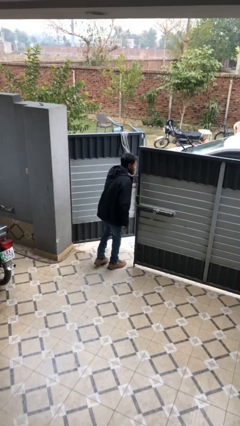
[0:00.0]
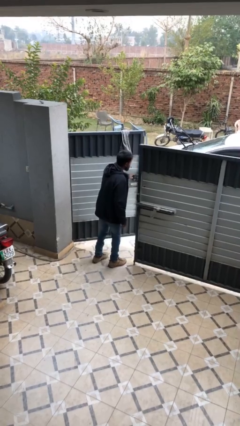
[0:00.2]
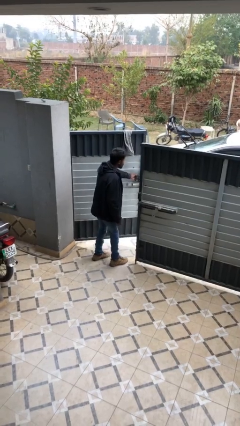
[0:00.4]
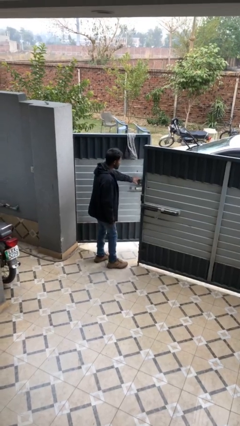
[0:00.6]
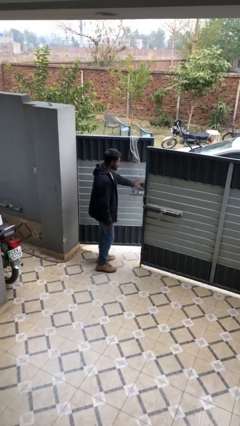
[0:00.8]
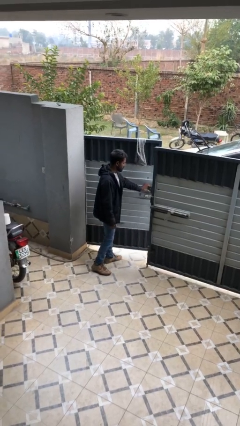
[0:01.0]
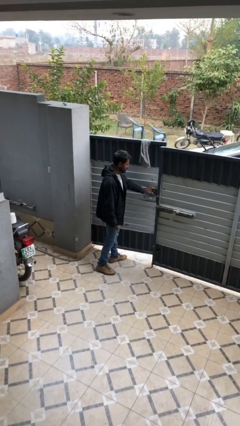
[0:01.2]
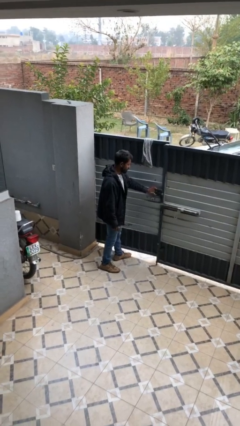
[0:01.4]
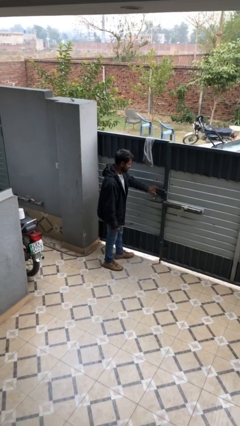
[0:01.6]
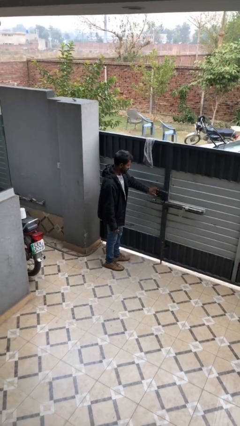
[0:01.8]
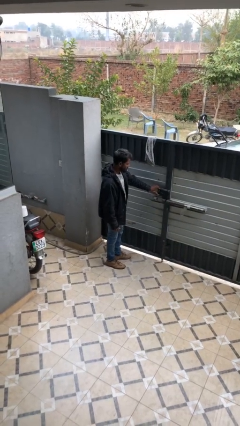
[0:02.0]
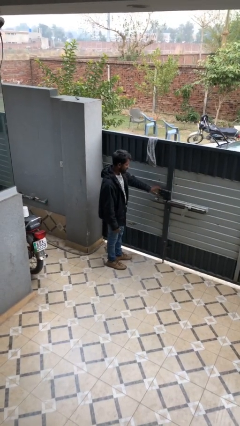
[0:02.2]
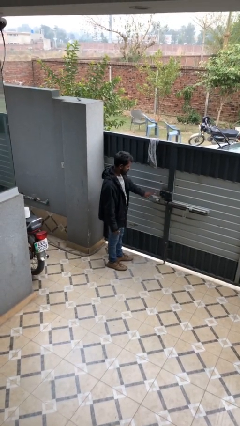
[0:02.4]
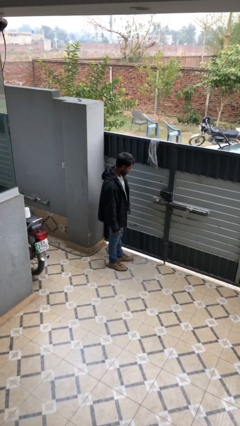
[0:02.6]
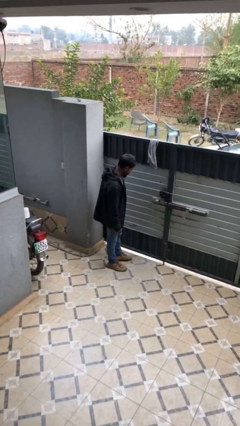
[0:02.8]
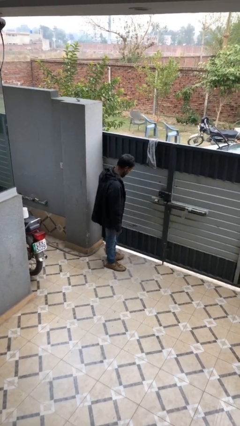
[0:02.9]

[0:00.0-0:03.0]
person closes facility door

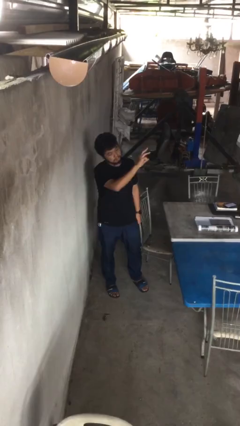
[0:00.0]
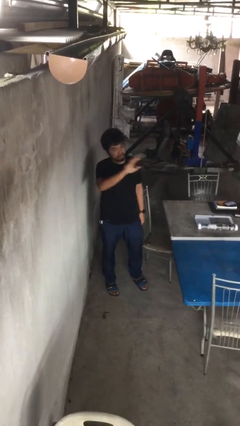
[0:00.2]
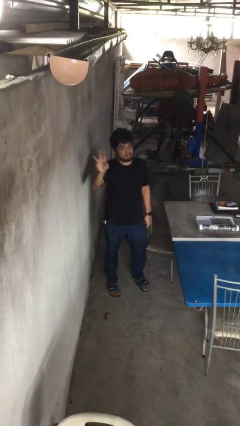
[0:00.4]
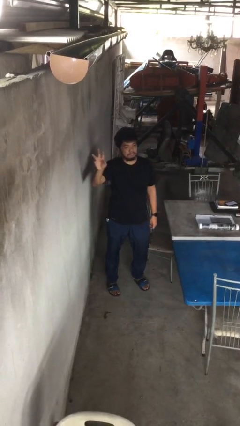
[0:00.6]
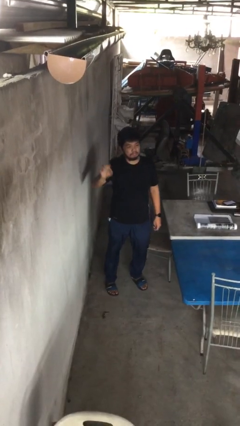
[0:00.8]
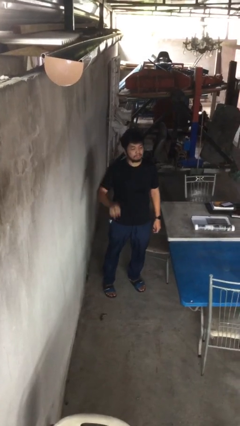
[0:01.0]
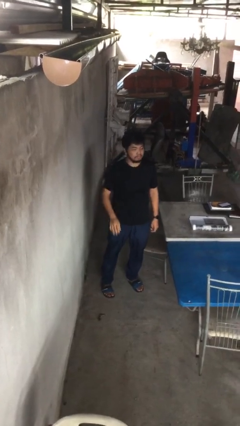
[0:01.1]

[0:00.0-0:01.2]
person gestures swipe right

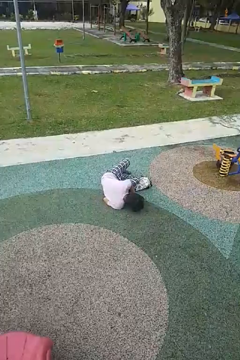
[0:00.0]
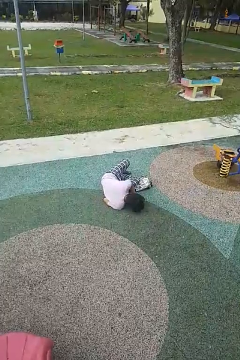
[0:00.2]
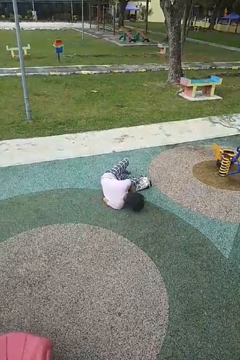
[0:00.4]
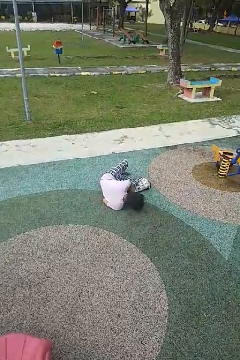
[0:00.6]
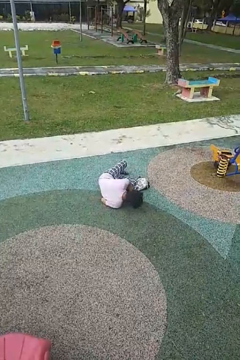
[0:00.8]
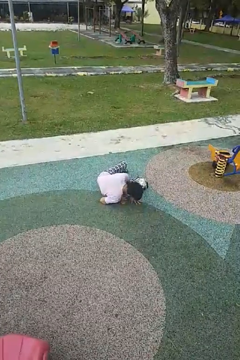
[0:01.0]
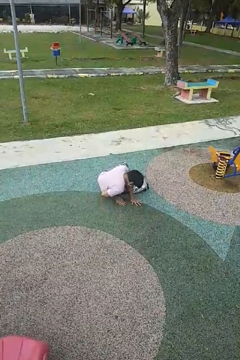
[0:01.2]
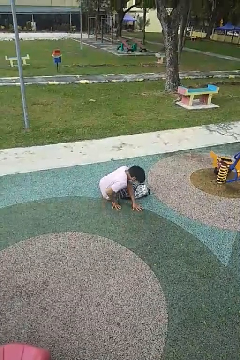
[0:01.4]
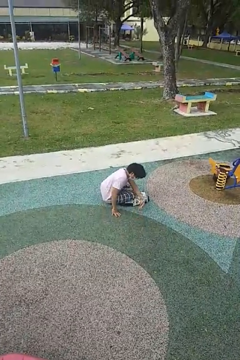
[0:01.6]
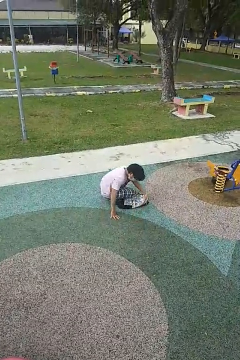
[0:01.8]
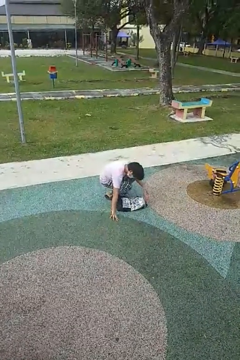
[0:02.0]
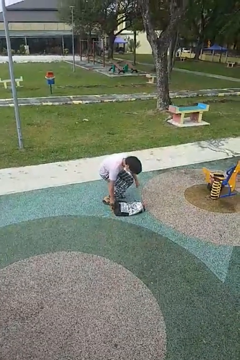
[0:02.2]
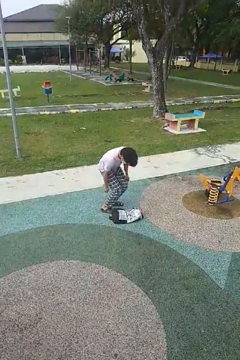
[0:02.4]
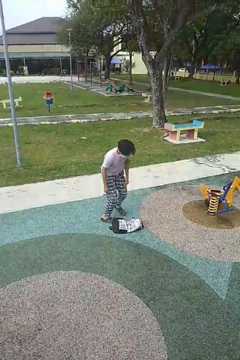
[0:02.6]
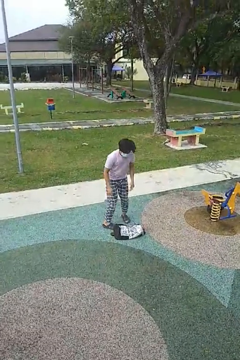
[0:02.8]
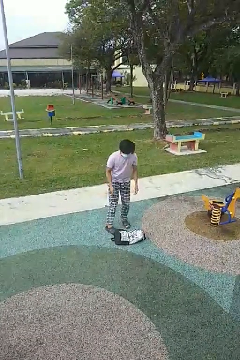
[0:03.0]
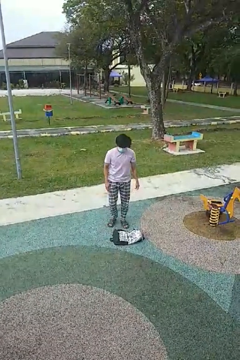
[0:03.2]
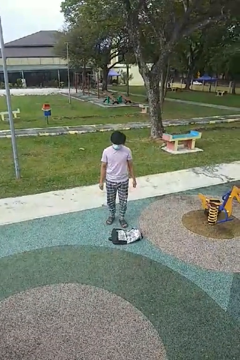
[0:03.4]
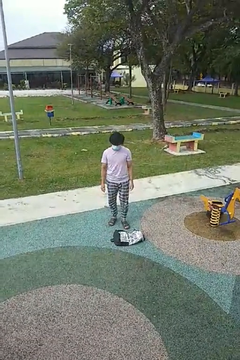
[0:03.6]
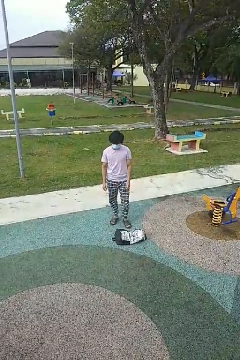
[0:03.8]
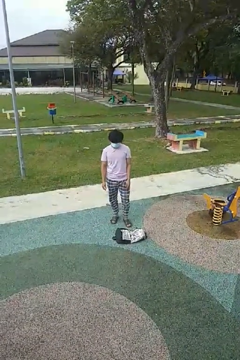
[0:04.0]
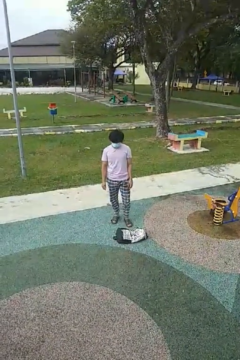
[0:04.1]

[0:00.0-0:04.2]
person stands up from floor

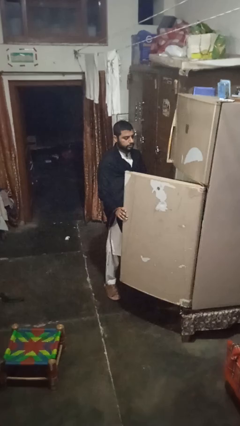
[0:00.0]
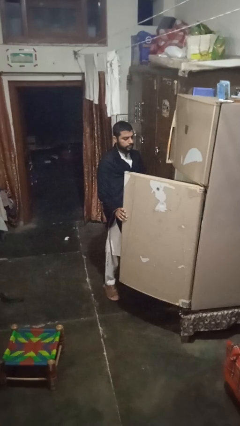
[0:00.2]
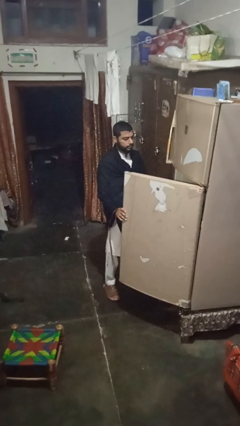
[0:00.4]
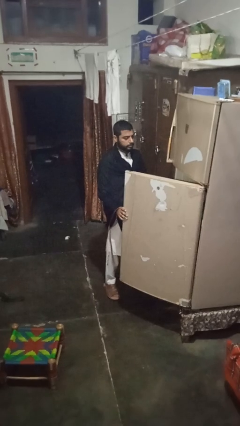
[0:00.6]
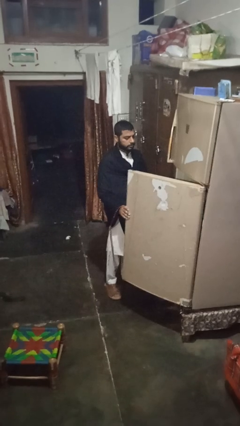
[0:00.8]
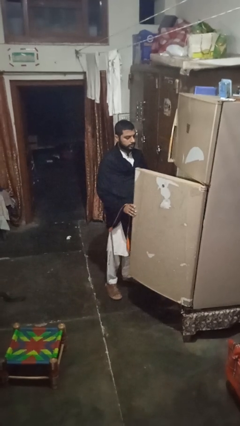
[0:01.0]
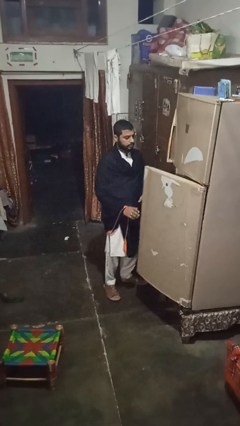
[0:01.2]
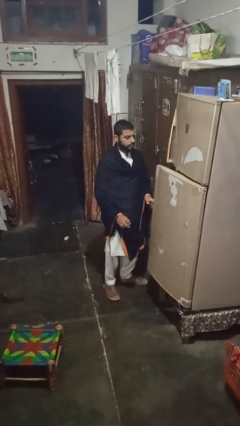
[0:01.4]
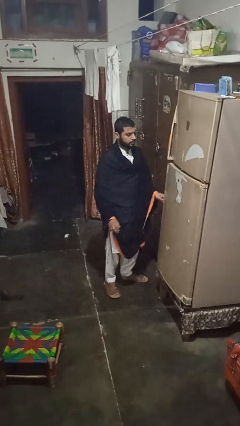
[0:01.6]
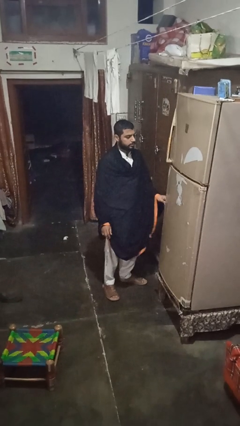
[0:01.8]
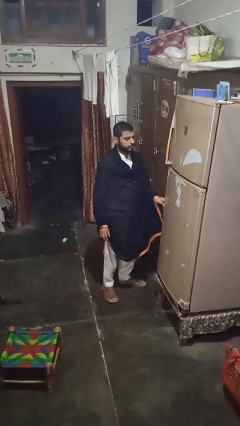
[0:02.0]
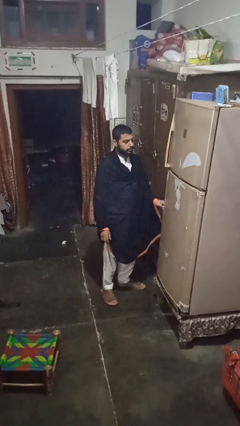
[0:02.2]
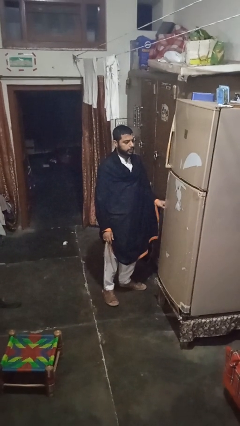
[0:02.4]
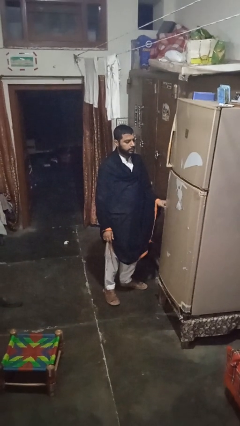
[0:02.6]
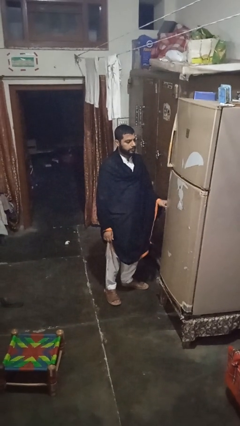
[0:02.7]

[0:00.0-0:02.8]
person closes refrigerator

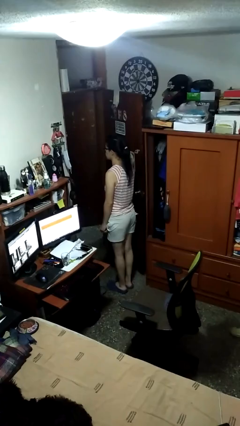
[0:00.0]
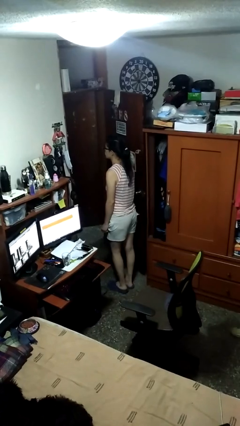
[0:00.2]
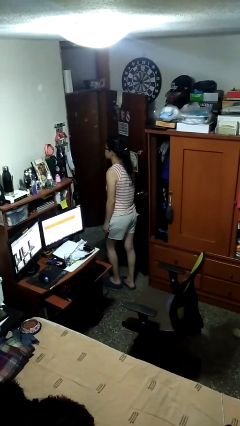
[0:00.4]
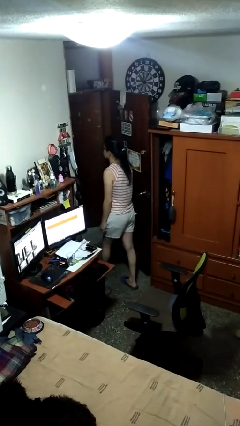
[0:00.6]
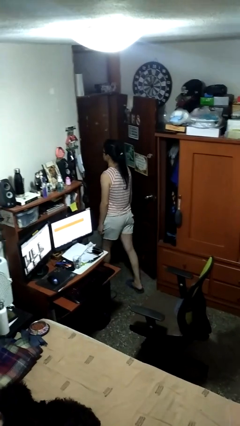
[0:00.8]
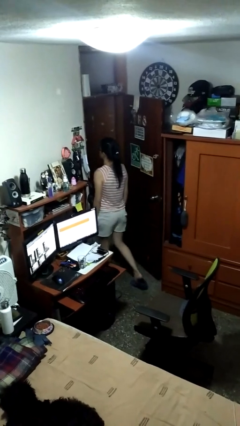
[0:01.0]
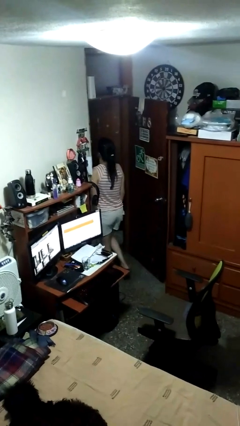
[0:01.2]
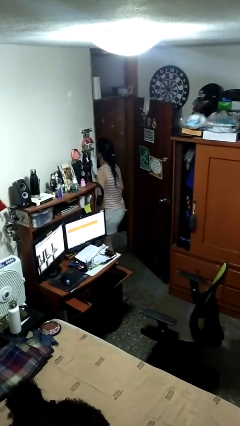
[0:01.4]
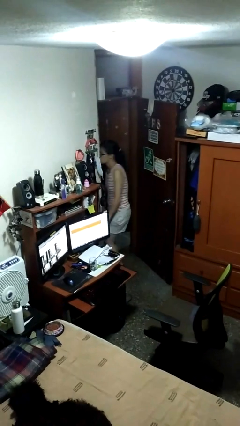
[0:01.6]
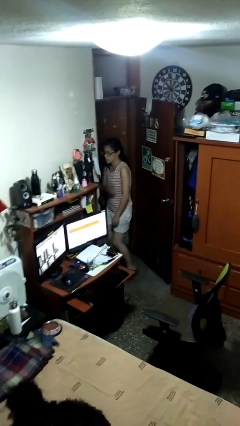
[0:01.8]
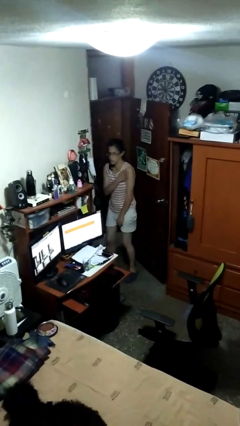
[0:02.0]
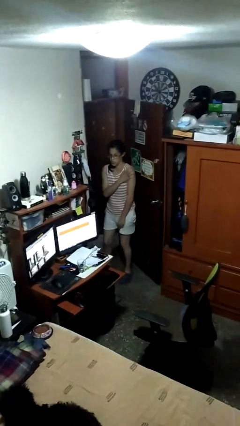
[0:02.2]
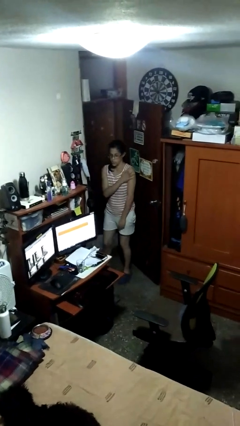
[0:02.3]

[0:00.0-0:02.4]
person bumps into wall

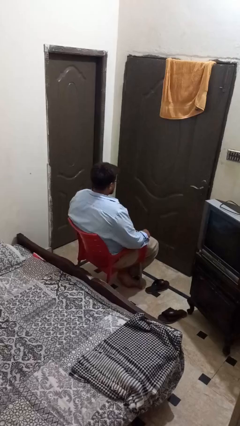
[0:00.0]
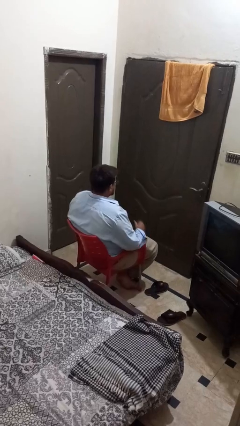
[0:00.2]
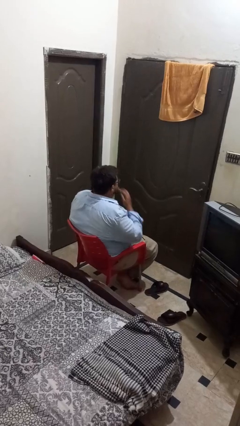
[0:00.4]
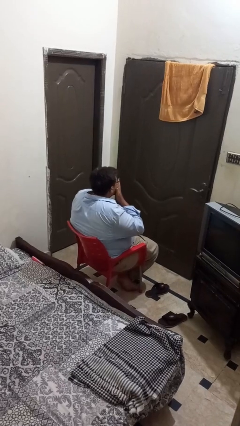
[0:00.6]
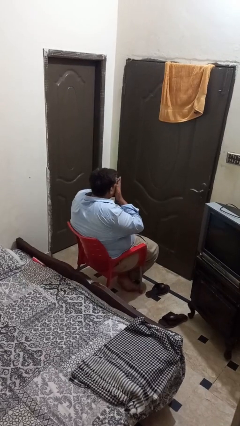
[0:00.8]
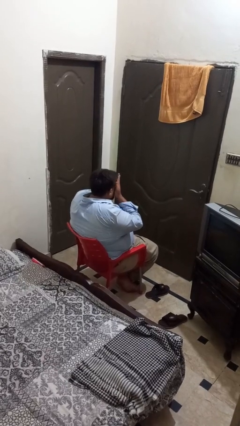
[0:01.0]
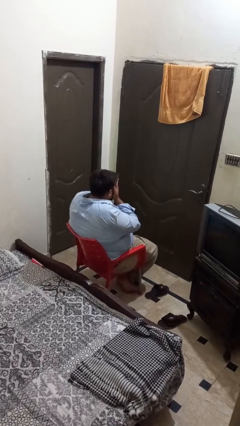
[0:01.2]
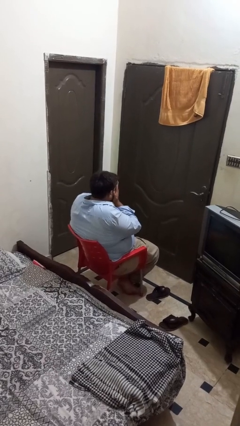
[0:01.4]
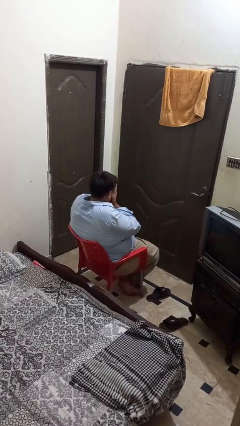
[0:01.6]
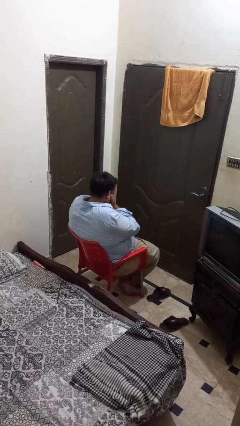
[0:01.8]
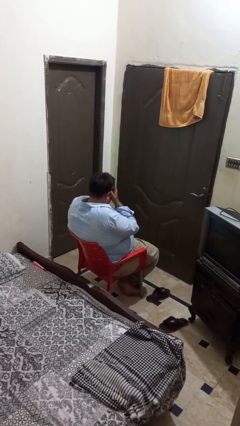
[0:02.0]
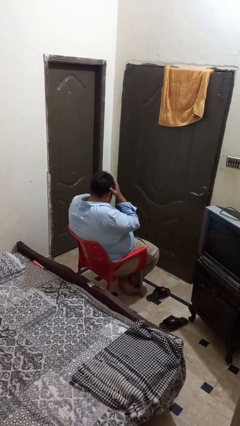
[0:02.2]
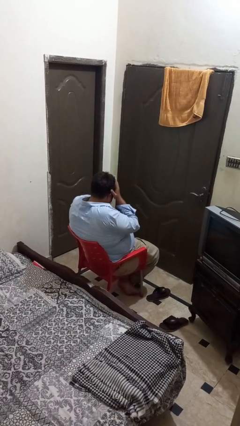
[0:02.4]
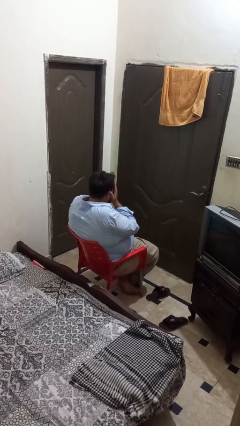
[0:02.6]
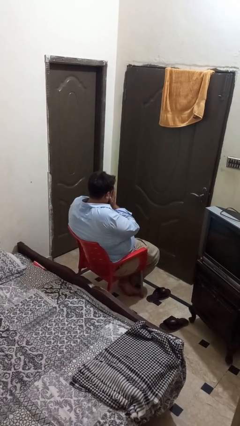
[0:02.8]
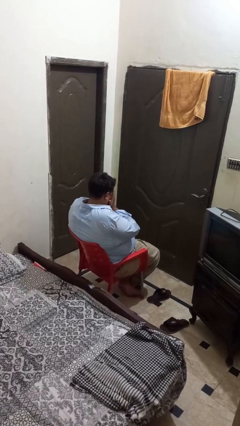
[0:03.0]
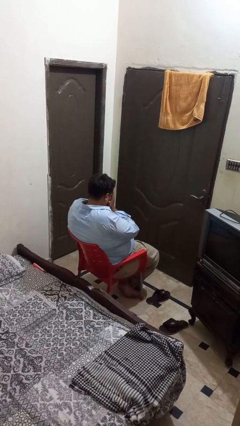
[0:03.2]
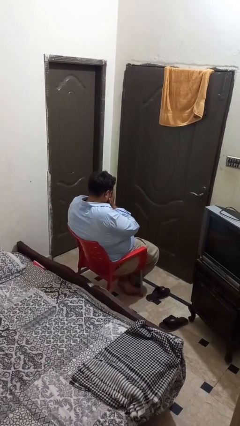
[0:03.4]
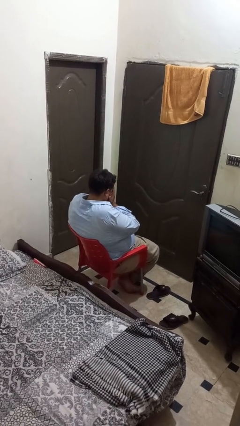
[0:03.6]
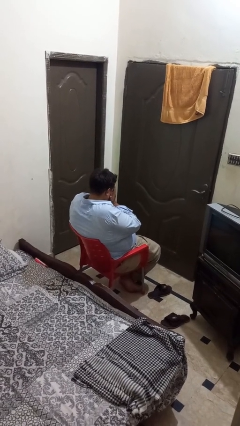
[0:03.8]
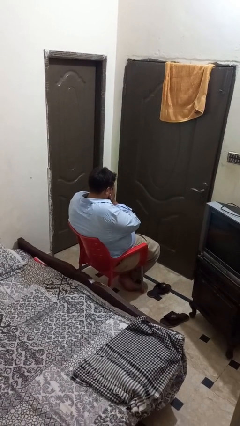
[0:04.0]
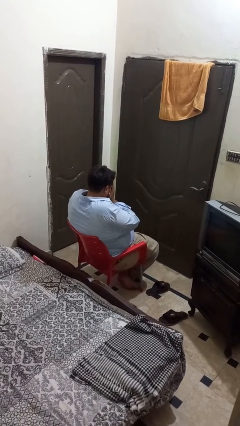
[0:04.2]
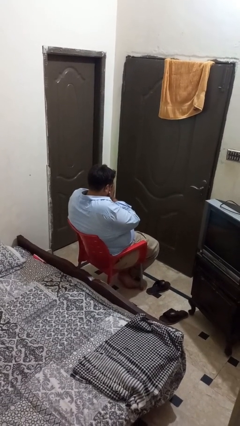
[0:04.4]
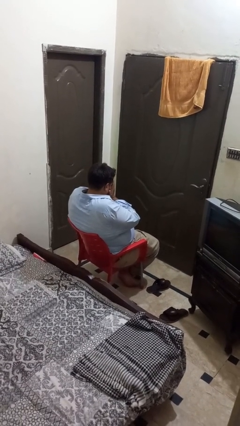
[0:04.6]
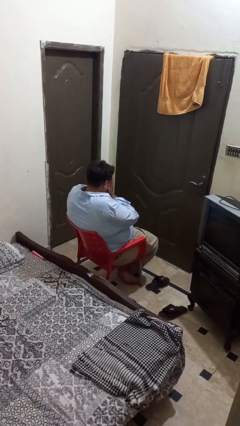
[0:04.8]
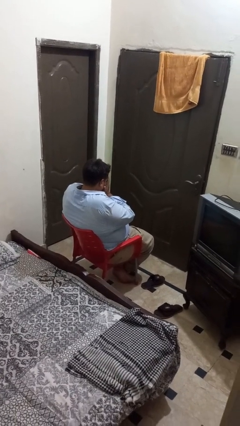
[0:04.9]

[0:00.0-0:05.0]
person covers face with hands
